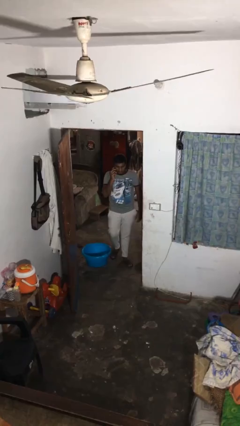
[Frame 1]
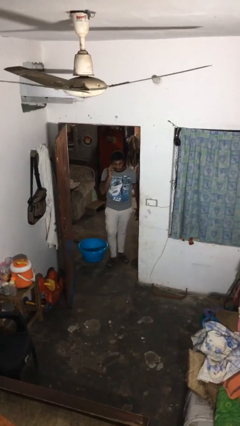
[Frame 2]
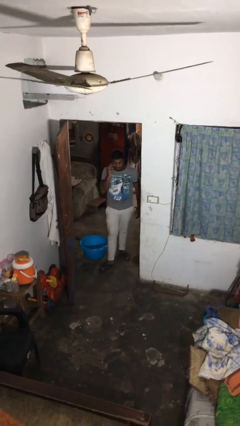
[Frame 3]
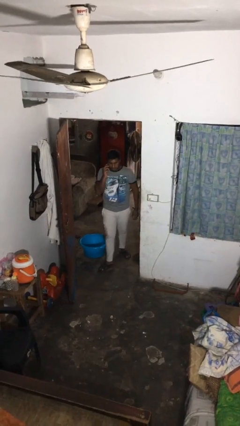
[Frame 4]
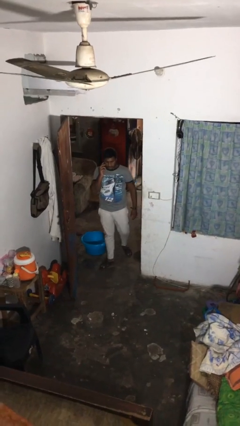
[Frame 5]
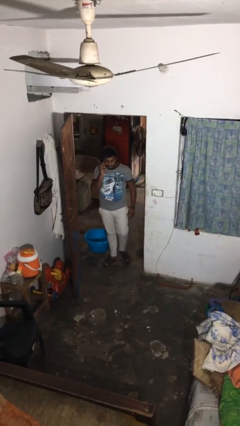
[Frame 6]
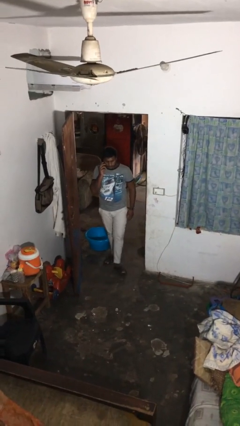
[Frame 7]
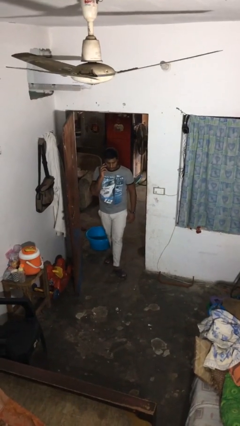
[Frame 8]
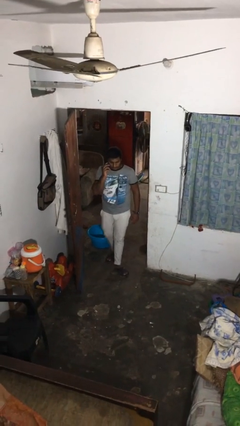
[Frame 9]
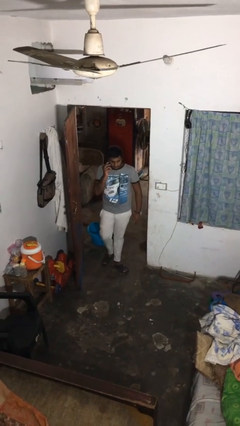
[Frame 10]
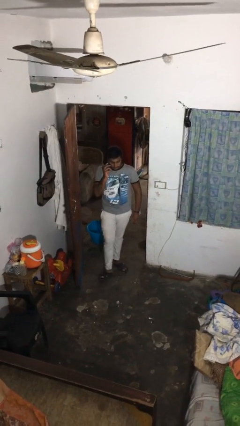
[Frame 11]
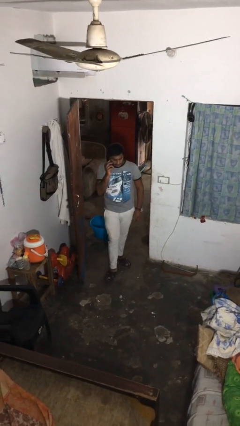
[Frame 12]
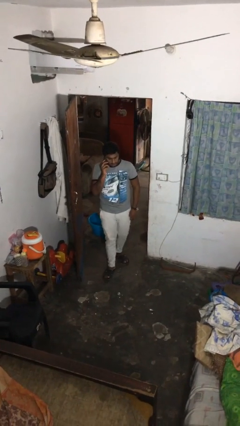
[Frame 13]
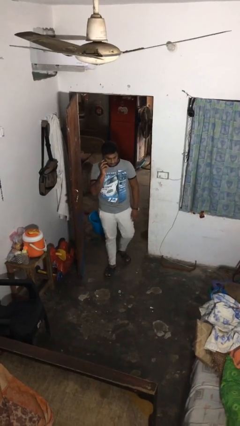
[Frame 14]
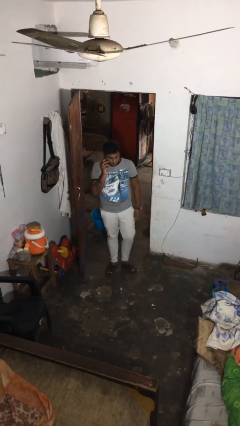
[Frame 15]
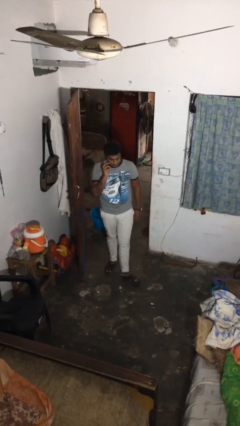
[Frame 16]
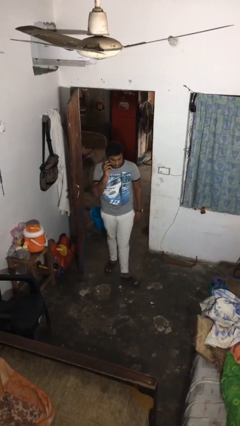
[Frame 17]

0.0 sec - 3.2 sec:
person enters scene through structure

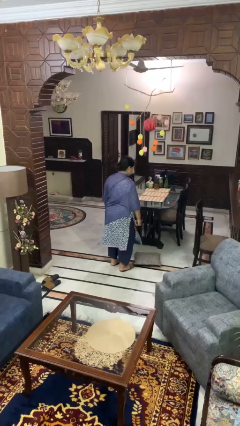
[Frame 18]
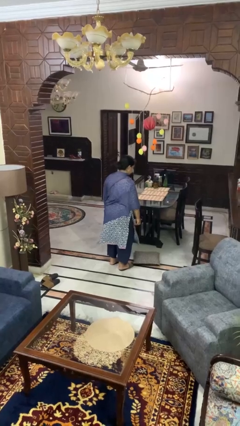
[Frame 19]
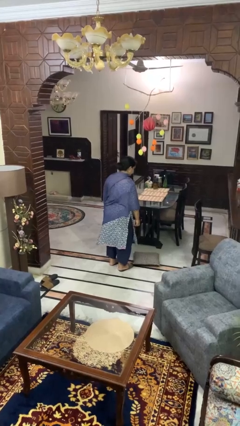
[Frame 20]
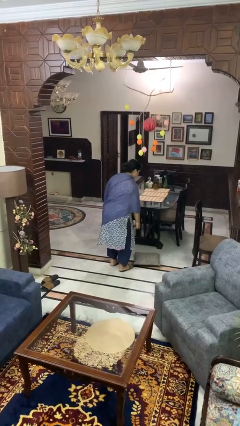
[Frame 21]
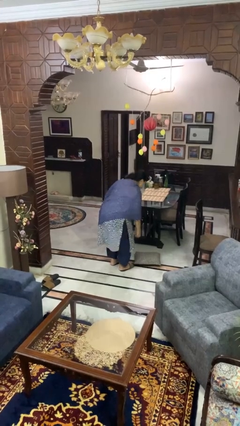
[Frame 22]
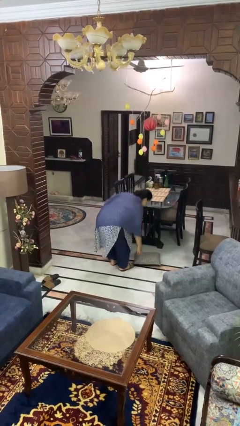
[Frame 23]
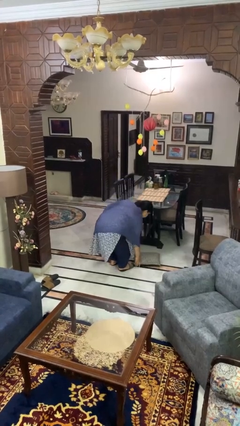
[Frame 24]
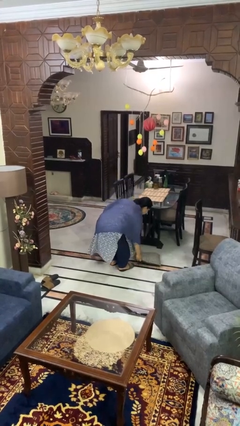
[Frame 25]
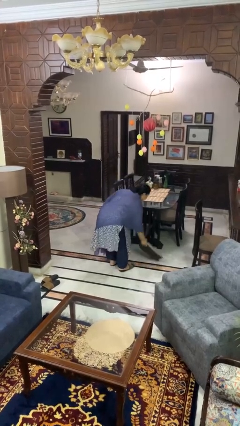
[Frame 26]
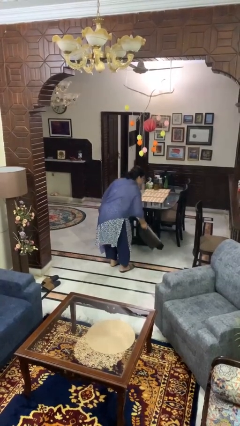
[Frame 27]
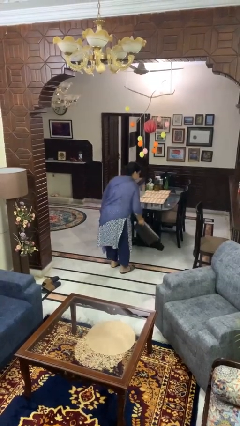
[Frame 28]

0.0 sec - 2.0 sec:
person picks up object from floor

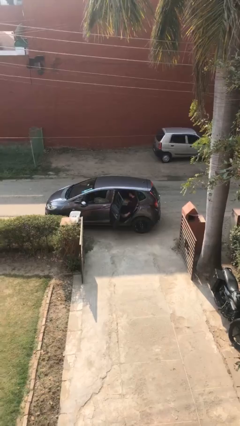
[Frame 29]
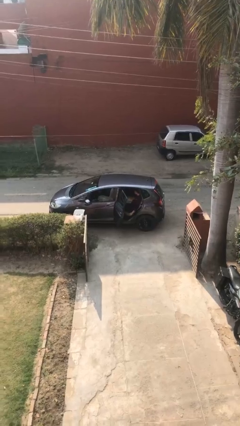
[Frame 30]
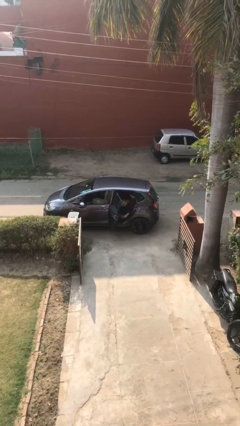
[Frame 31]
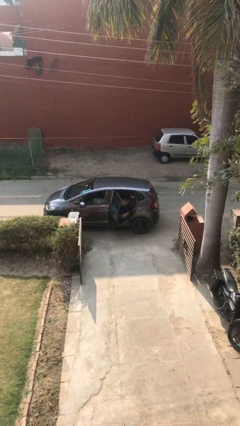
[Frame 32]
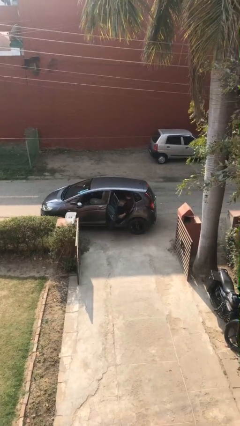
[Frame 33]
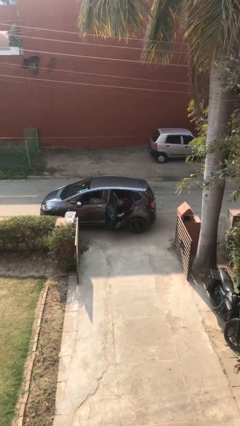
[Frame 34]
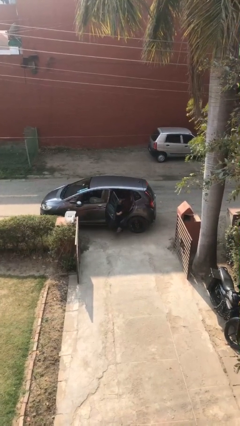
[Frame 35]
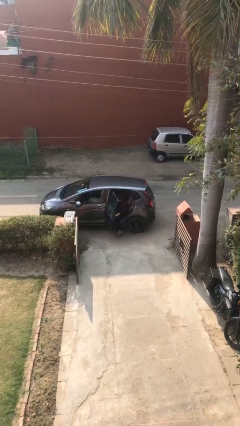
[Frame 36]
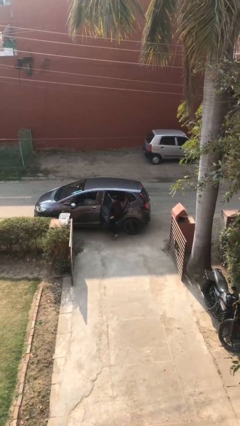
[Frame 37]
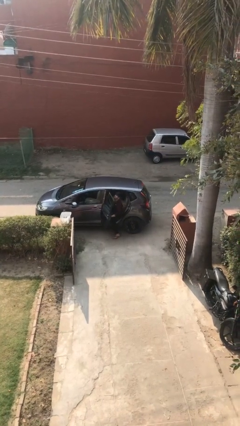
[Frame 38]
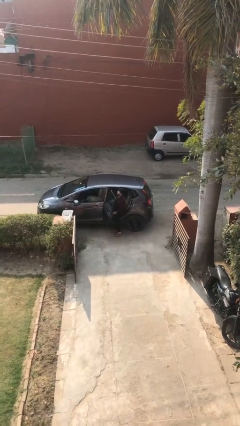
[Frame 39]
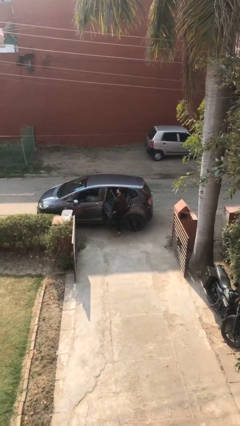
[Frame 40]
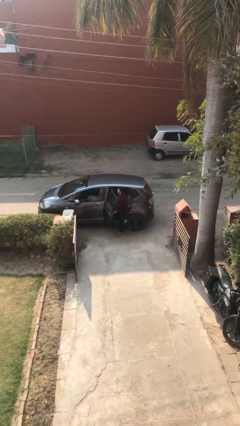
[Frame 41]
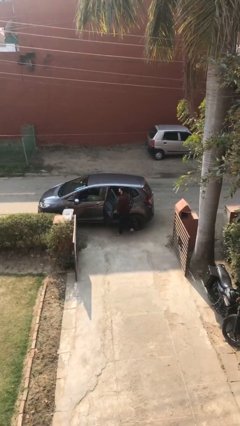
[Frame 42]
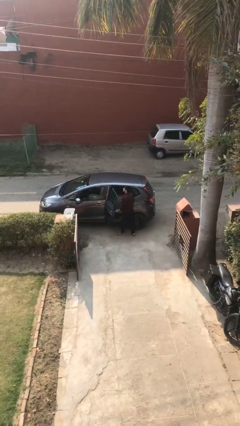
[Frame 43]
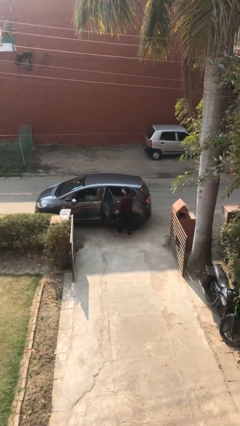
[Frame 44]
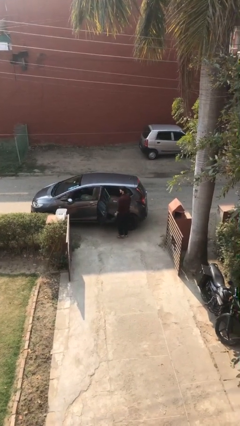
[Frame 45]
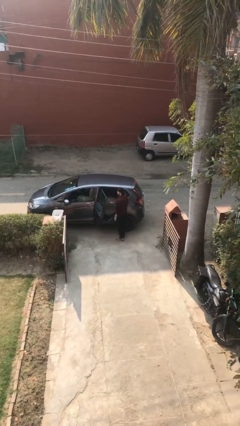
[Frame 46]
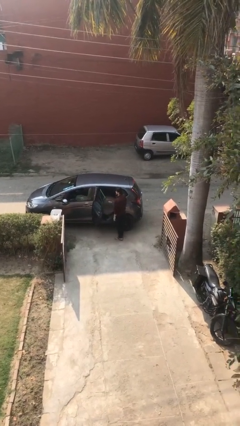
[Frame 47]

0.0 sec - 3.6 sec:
person exits car

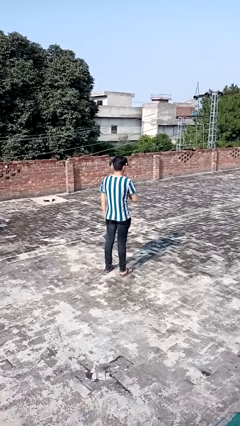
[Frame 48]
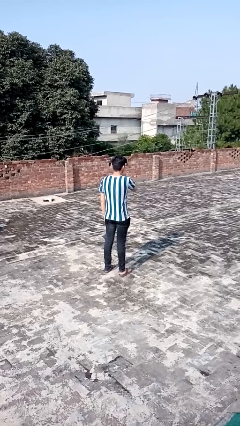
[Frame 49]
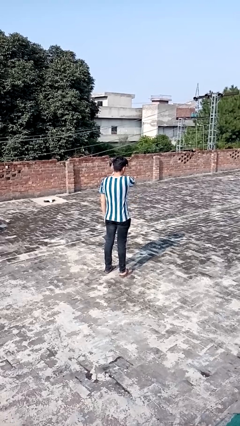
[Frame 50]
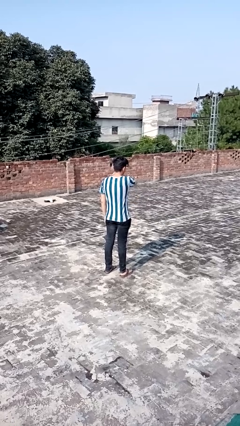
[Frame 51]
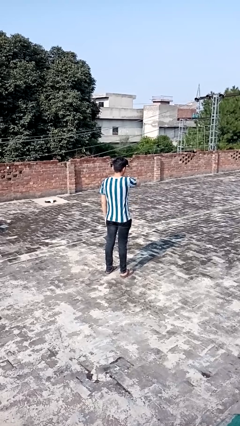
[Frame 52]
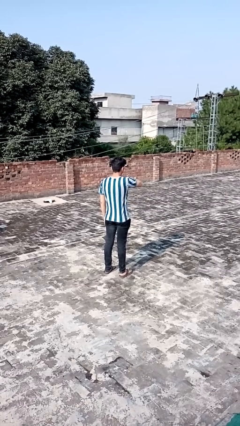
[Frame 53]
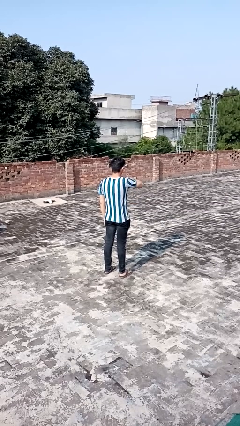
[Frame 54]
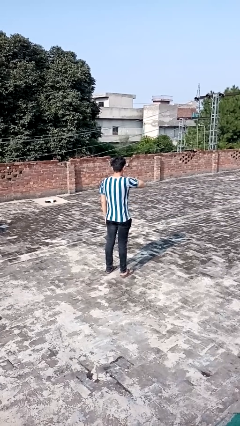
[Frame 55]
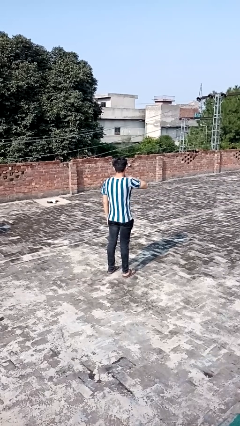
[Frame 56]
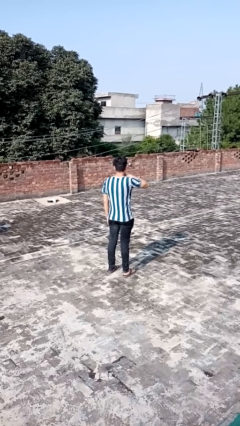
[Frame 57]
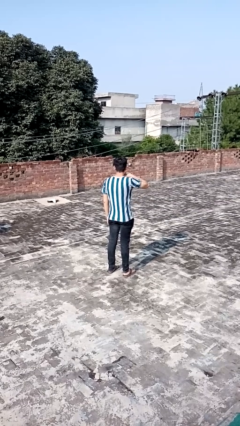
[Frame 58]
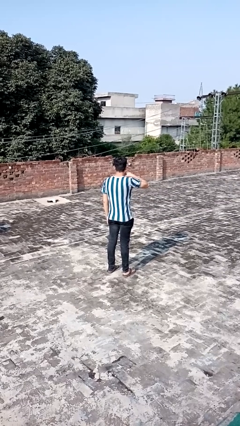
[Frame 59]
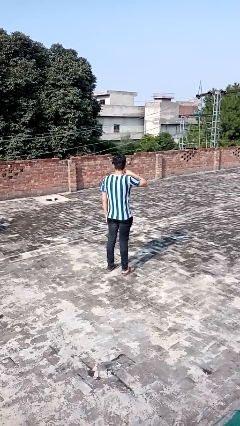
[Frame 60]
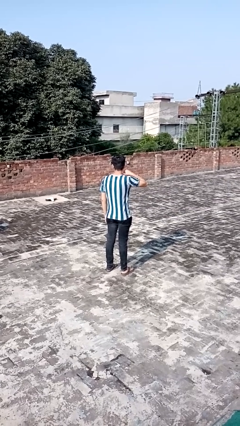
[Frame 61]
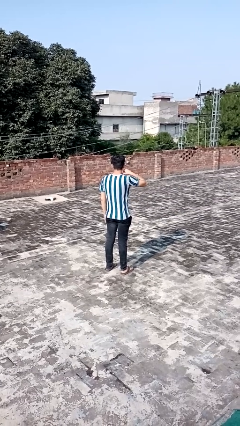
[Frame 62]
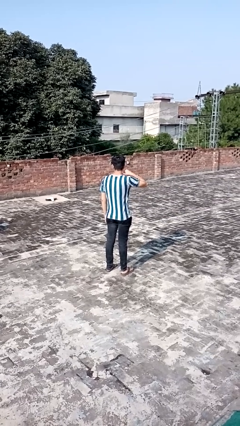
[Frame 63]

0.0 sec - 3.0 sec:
person gestures cut

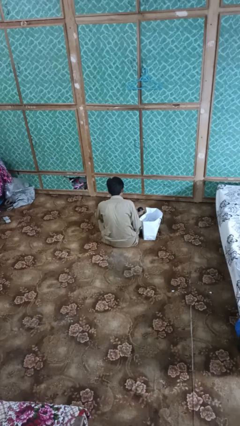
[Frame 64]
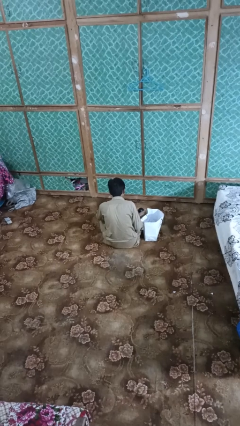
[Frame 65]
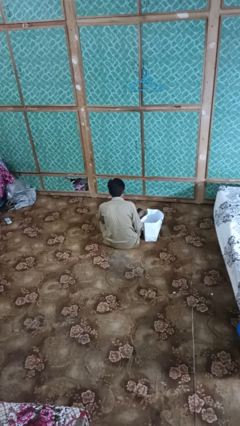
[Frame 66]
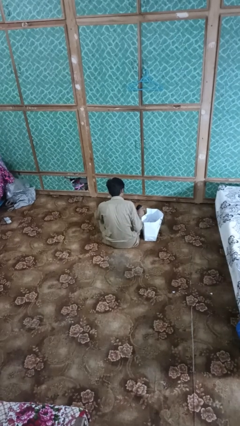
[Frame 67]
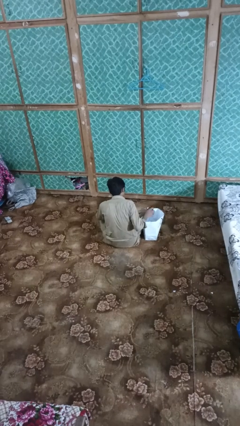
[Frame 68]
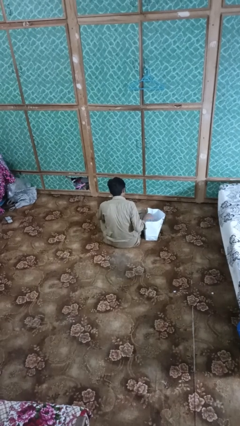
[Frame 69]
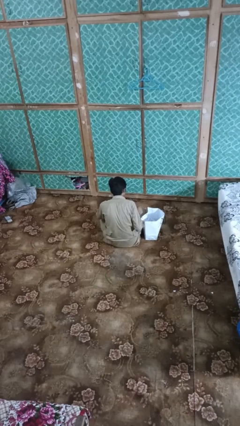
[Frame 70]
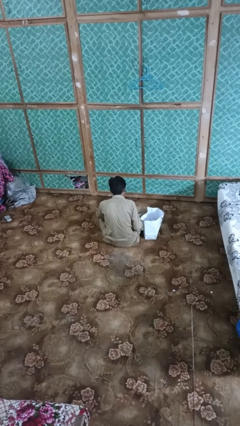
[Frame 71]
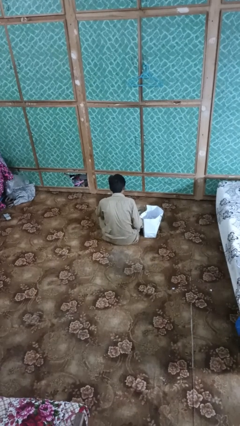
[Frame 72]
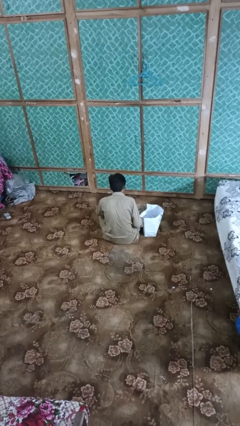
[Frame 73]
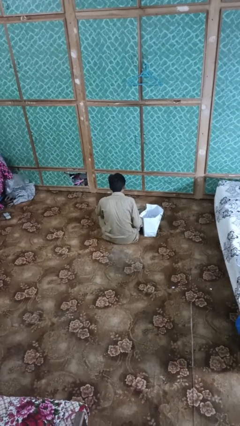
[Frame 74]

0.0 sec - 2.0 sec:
person puts object into bag

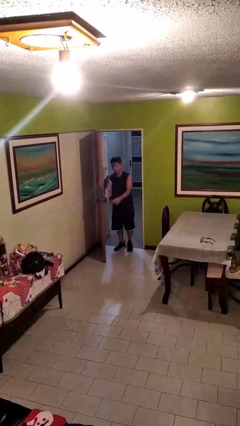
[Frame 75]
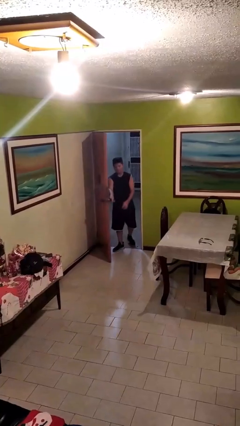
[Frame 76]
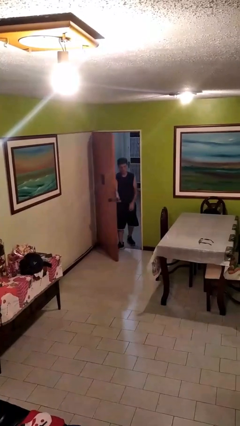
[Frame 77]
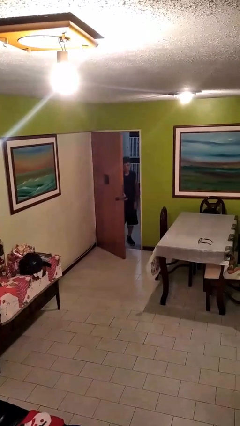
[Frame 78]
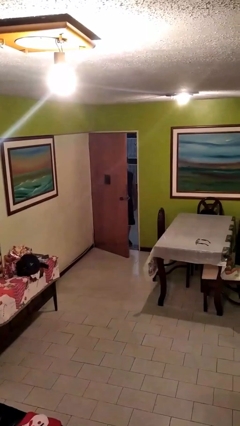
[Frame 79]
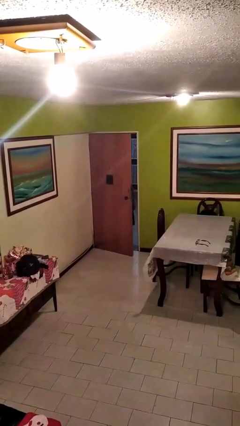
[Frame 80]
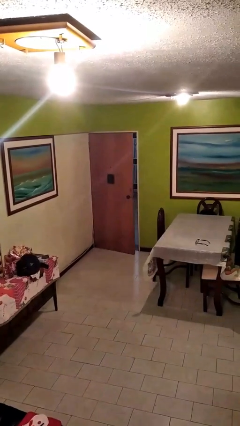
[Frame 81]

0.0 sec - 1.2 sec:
person closes facility door

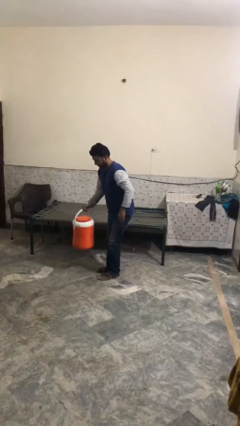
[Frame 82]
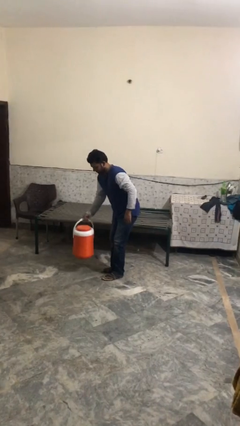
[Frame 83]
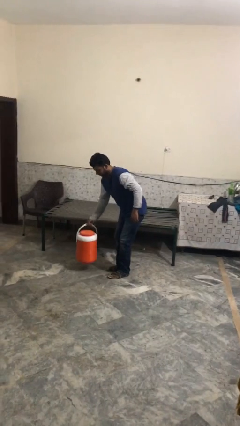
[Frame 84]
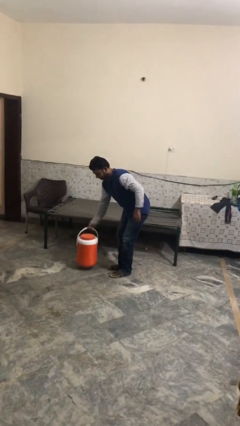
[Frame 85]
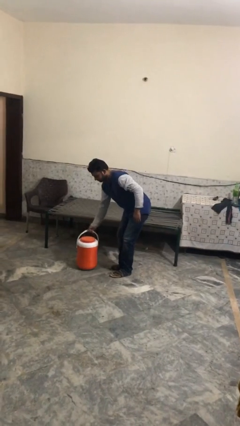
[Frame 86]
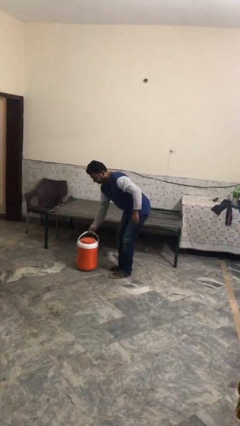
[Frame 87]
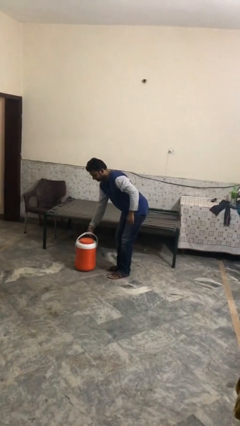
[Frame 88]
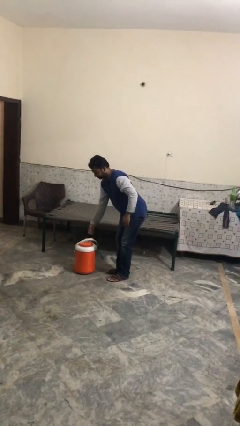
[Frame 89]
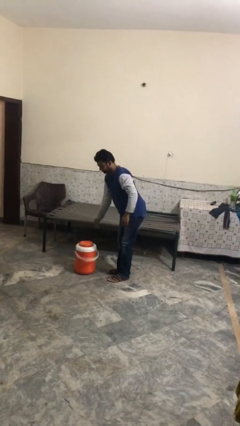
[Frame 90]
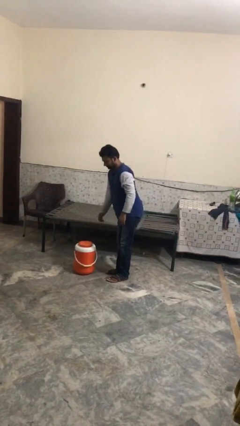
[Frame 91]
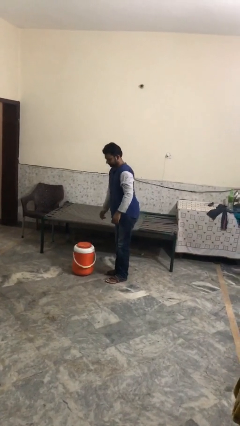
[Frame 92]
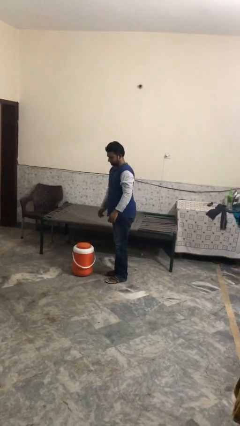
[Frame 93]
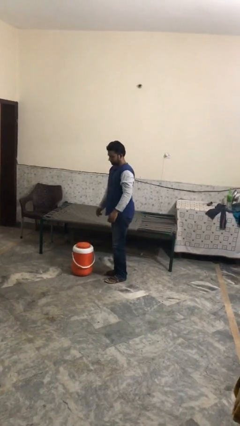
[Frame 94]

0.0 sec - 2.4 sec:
person puts down object on floor
